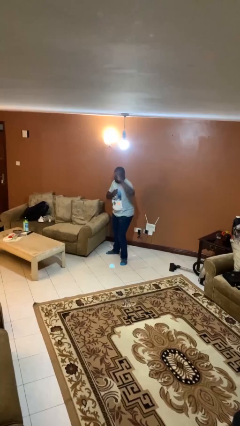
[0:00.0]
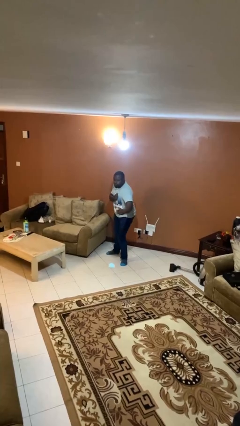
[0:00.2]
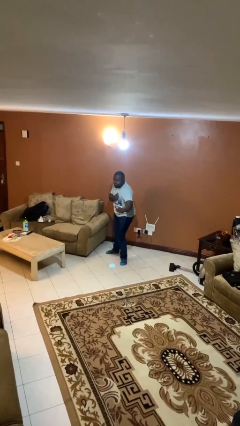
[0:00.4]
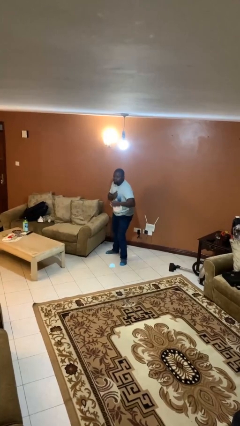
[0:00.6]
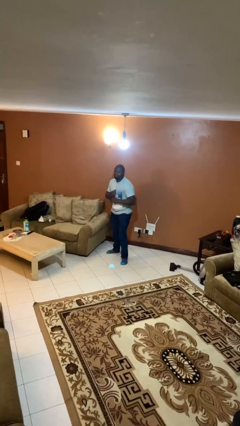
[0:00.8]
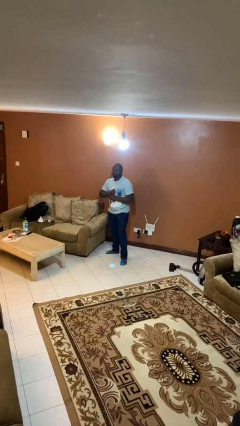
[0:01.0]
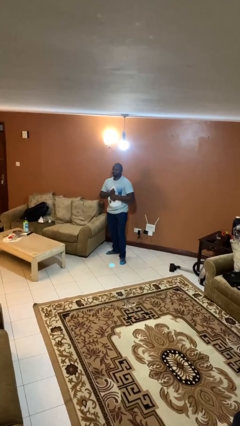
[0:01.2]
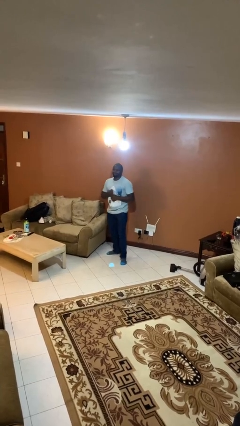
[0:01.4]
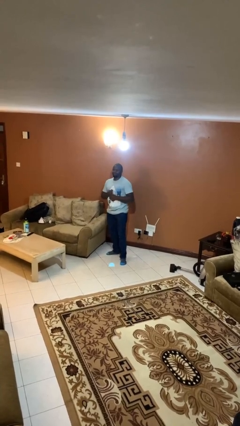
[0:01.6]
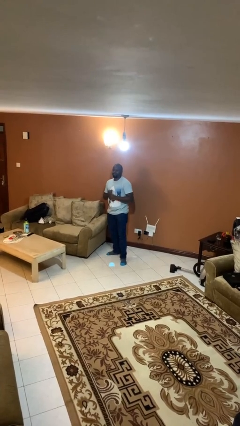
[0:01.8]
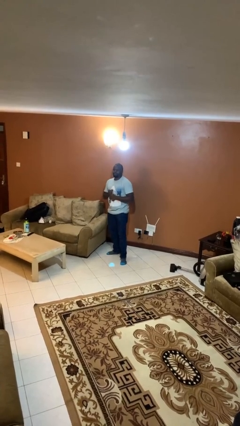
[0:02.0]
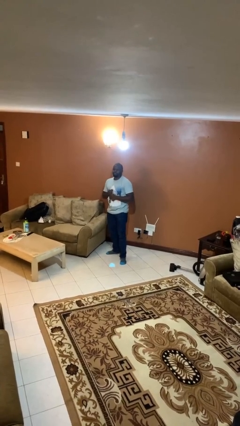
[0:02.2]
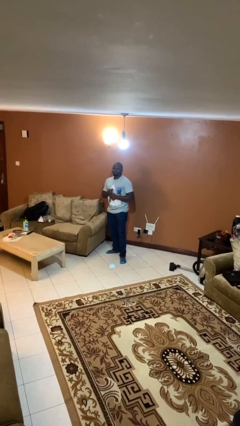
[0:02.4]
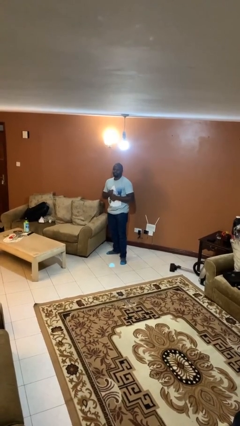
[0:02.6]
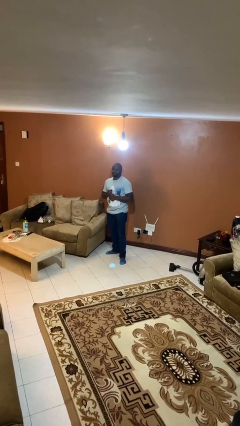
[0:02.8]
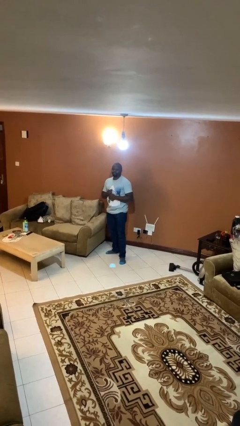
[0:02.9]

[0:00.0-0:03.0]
person karate chop

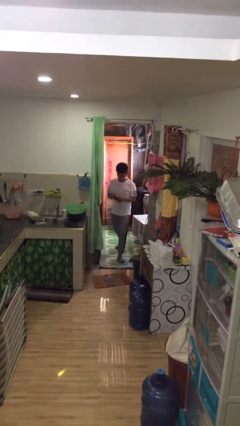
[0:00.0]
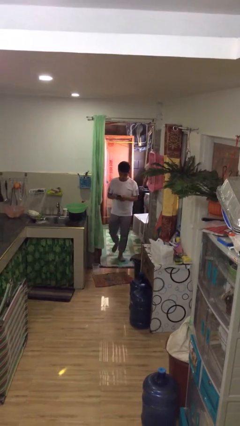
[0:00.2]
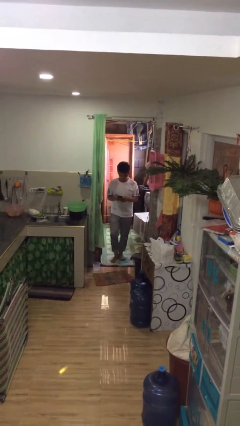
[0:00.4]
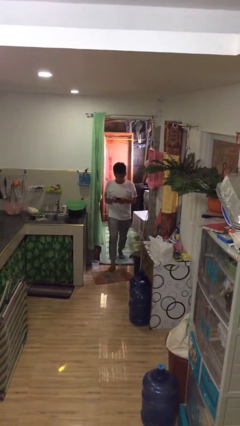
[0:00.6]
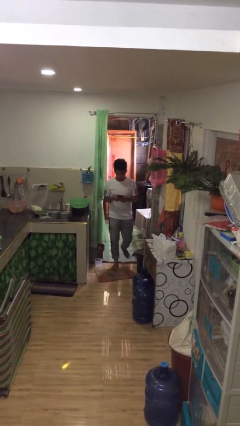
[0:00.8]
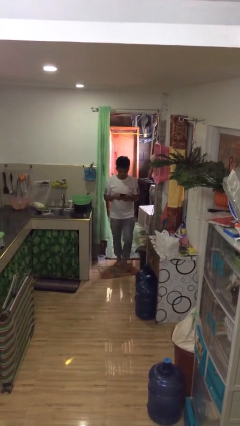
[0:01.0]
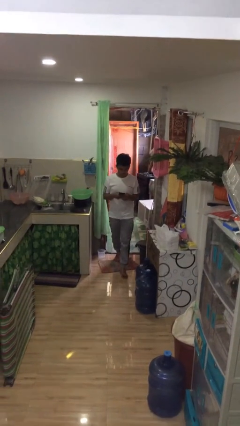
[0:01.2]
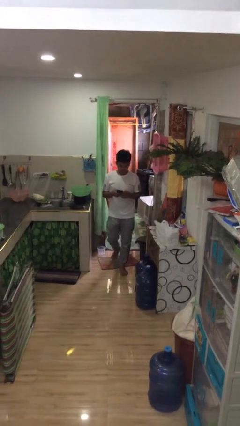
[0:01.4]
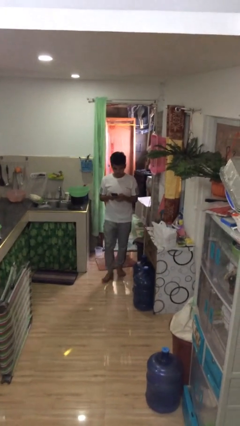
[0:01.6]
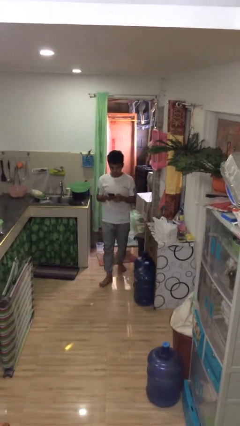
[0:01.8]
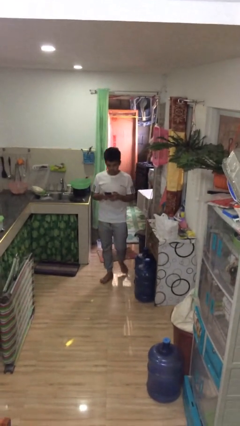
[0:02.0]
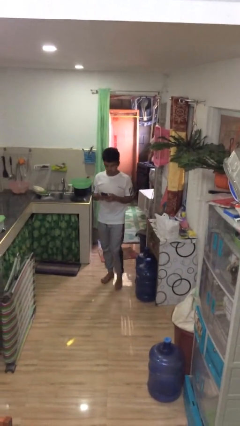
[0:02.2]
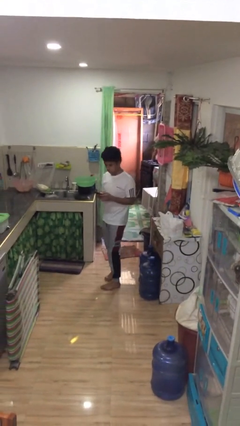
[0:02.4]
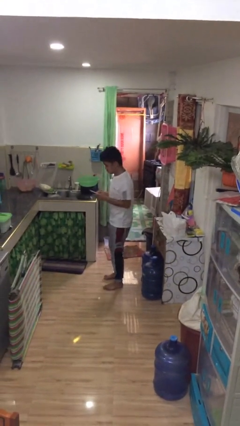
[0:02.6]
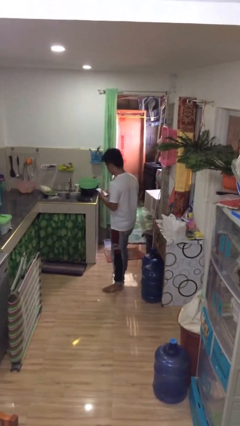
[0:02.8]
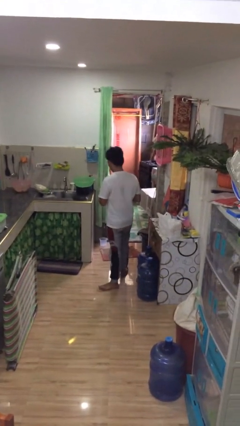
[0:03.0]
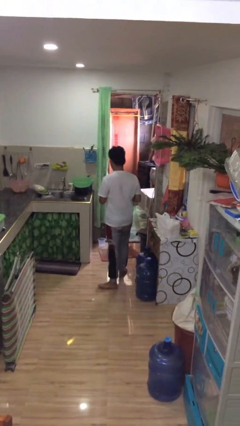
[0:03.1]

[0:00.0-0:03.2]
person enters scene through structure

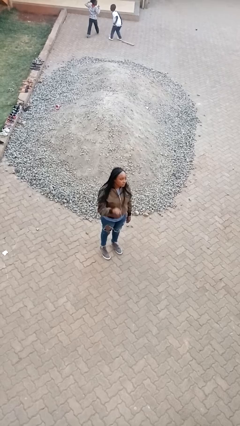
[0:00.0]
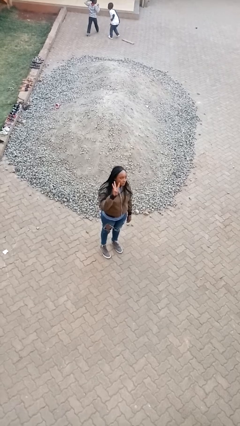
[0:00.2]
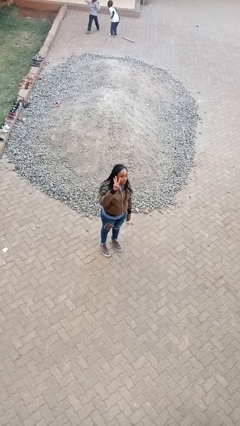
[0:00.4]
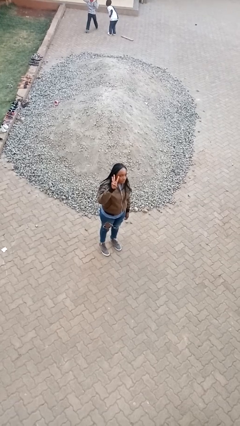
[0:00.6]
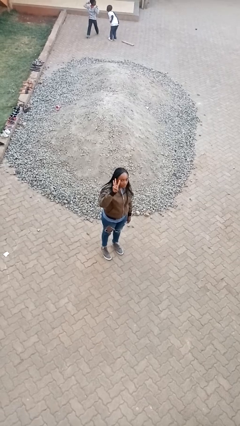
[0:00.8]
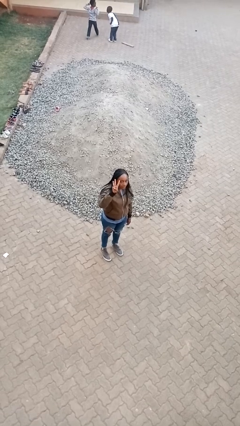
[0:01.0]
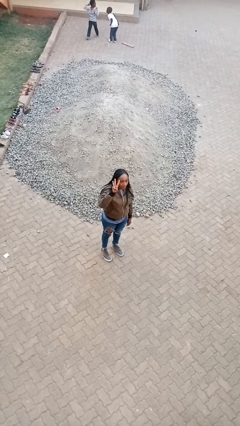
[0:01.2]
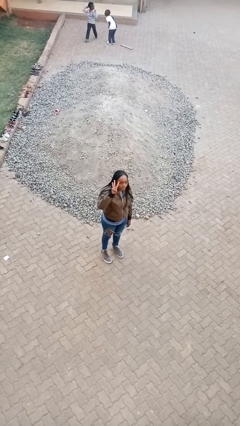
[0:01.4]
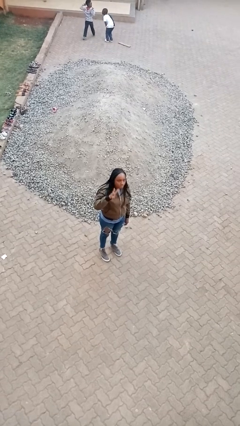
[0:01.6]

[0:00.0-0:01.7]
person gestures number three

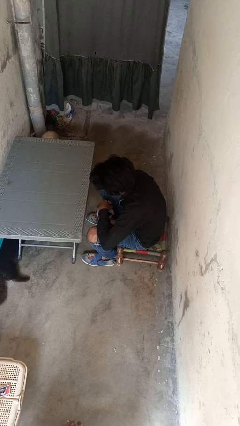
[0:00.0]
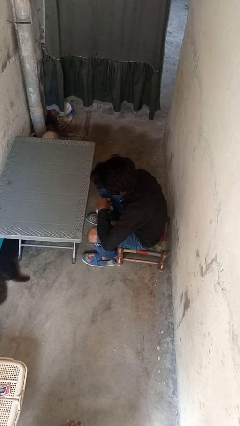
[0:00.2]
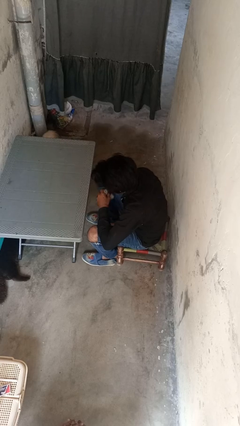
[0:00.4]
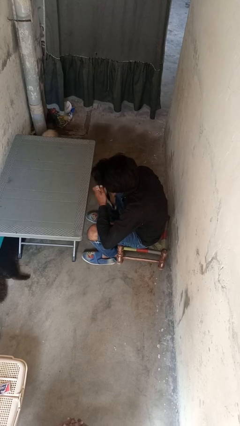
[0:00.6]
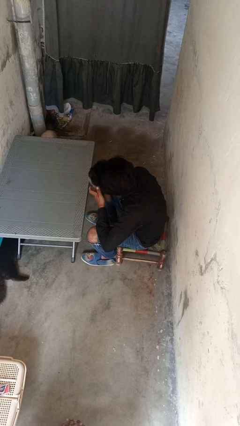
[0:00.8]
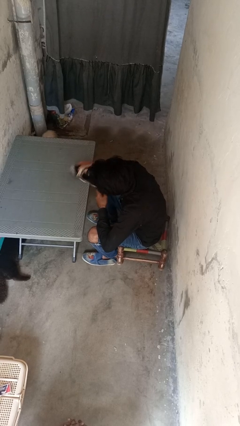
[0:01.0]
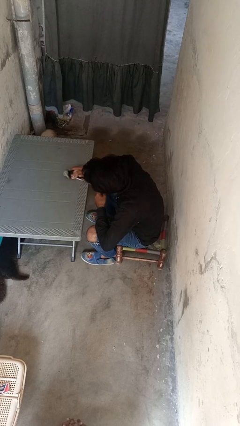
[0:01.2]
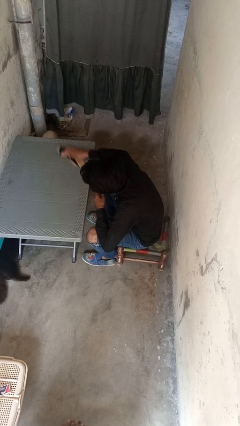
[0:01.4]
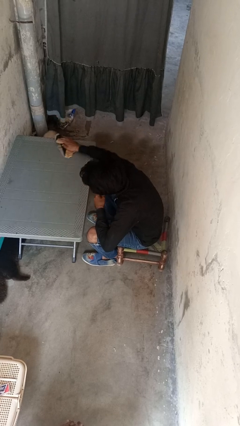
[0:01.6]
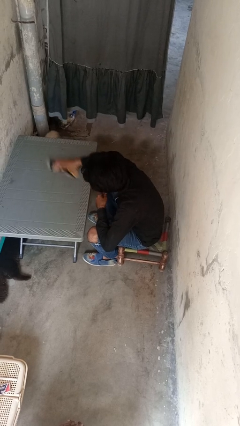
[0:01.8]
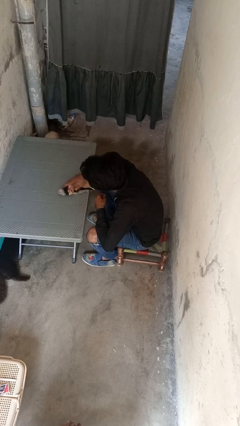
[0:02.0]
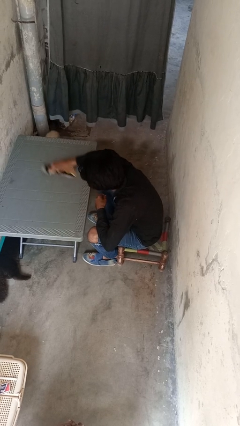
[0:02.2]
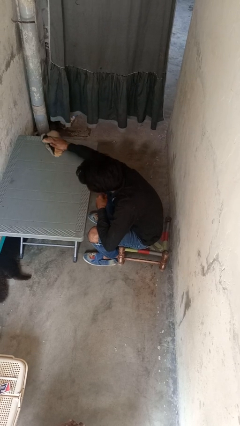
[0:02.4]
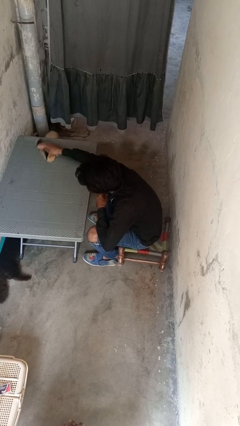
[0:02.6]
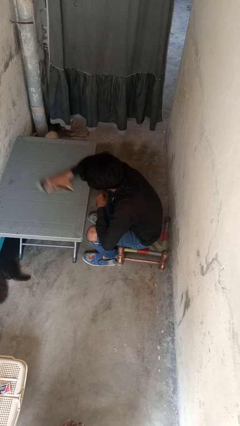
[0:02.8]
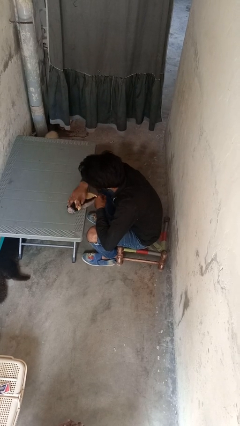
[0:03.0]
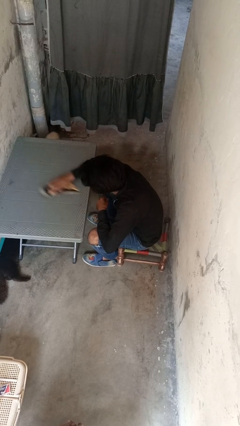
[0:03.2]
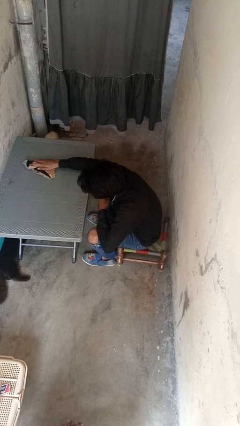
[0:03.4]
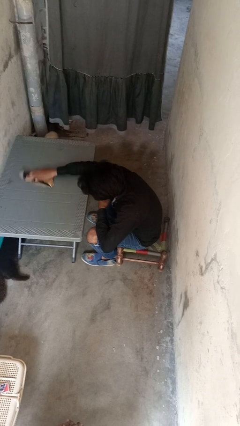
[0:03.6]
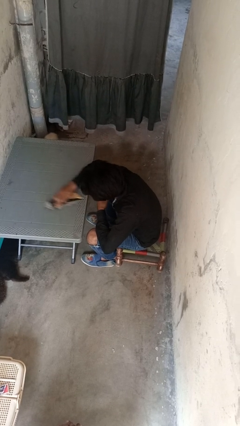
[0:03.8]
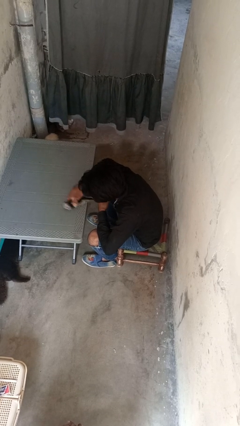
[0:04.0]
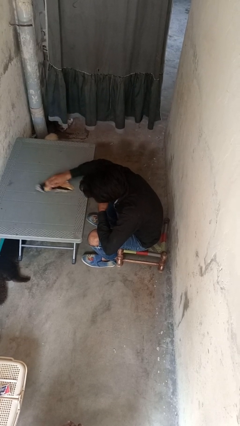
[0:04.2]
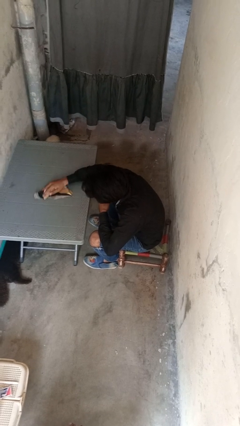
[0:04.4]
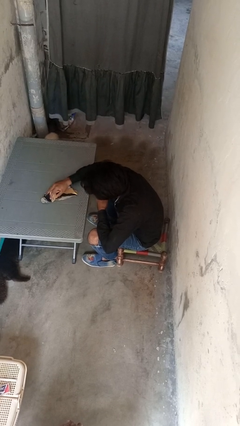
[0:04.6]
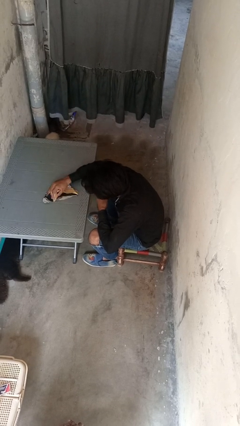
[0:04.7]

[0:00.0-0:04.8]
person cleans table with rag

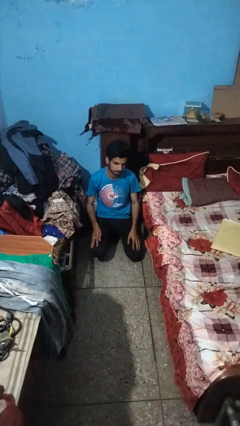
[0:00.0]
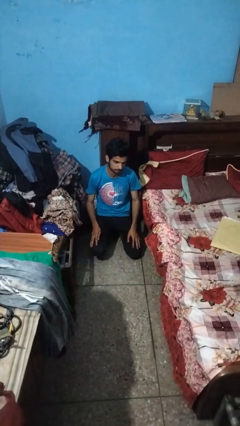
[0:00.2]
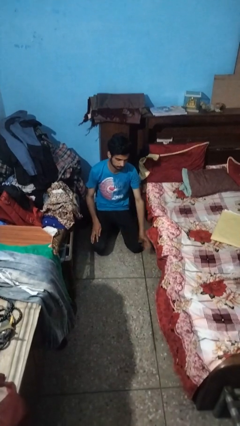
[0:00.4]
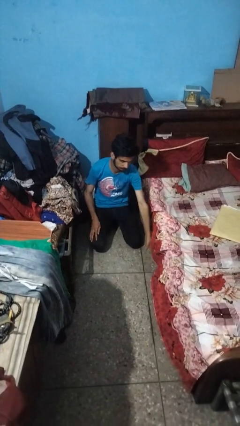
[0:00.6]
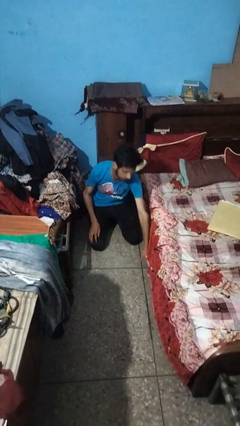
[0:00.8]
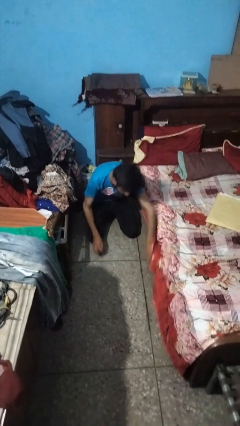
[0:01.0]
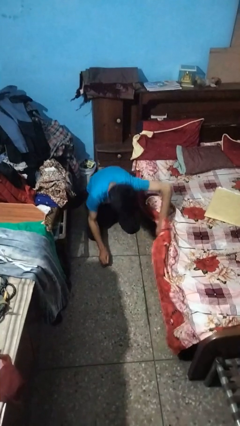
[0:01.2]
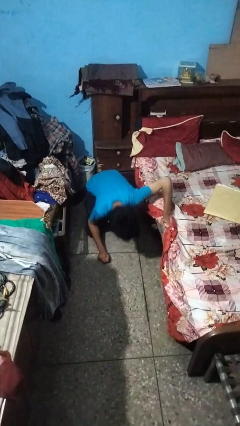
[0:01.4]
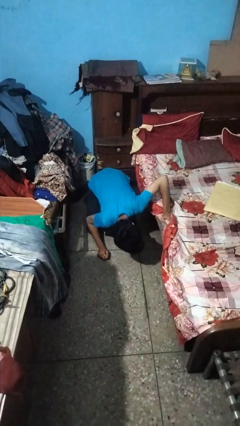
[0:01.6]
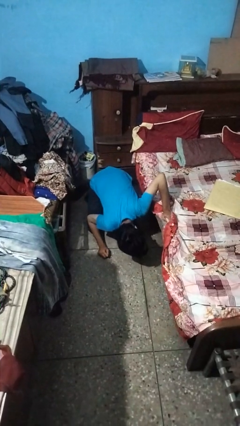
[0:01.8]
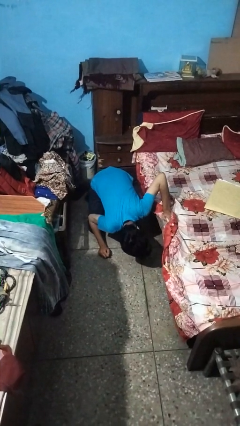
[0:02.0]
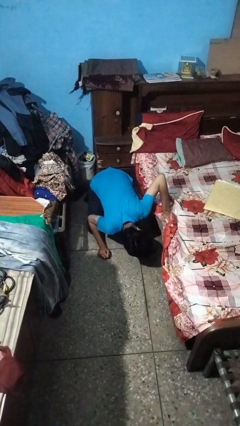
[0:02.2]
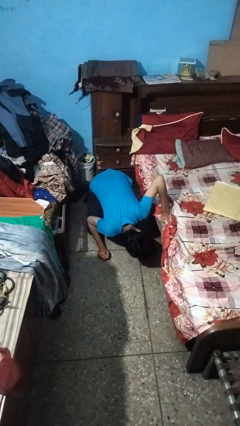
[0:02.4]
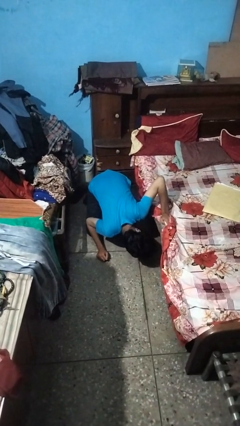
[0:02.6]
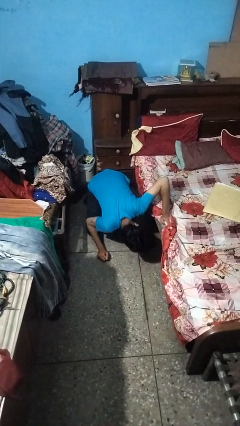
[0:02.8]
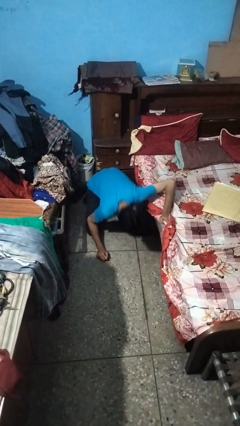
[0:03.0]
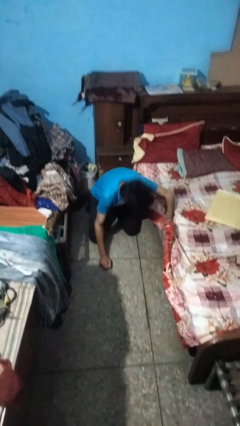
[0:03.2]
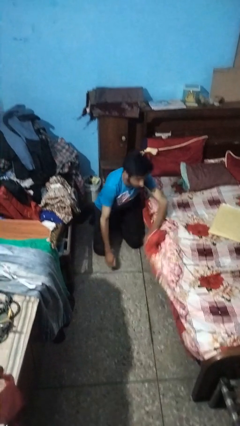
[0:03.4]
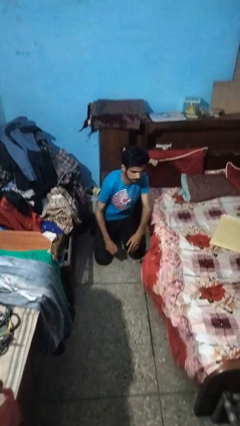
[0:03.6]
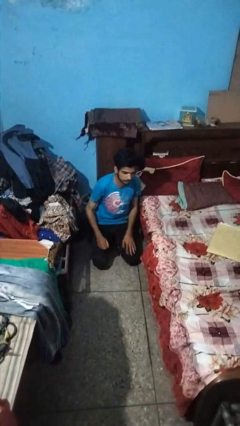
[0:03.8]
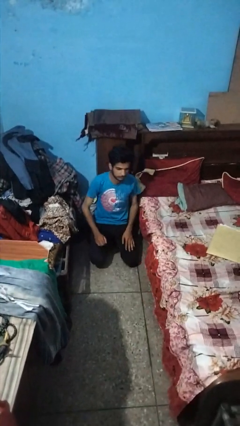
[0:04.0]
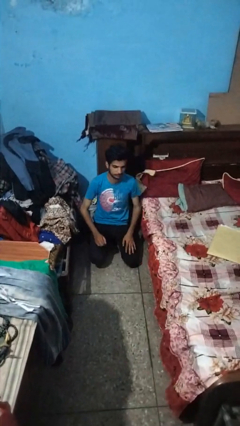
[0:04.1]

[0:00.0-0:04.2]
person searches under bed

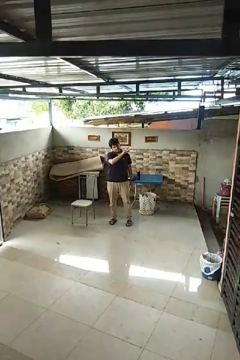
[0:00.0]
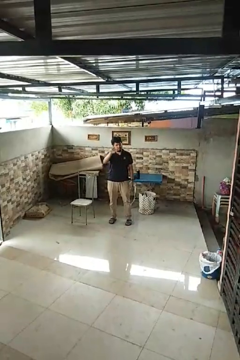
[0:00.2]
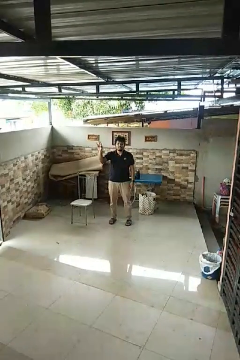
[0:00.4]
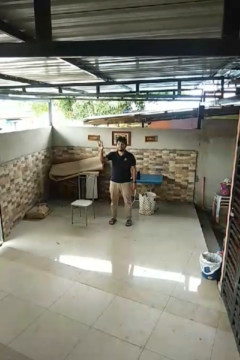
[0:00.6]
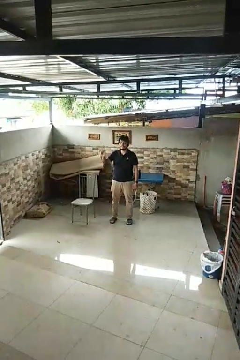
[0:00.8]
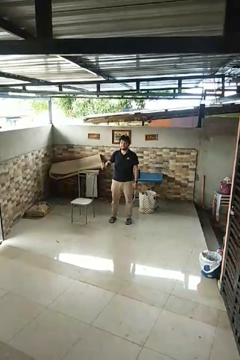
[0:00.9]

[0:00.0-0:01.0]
person gestures swipe right
